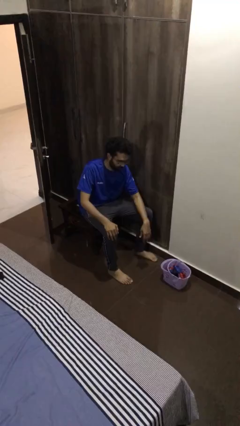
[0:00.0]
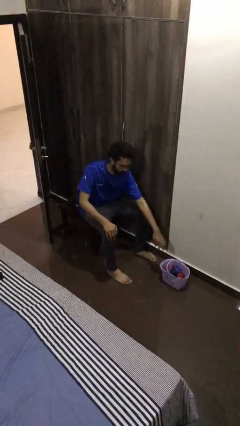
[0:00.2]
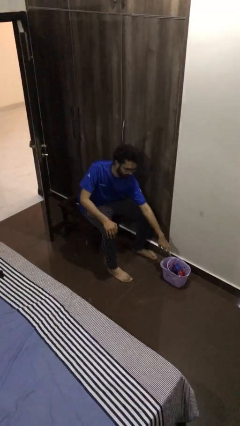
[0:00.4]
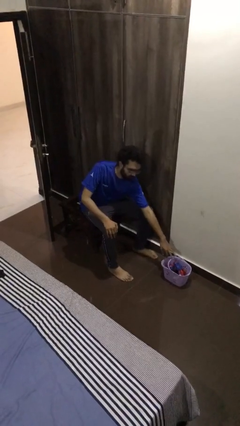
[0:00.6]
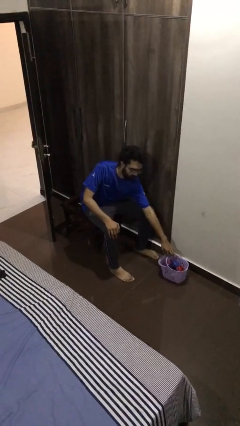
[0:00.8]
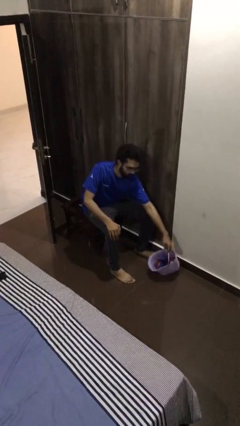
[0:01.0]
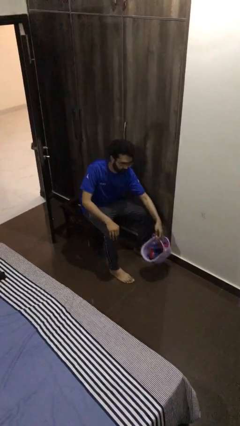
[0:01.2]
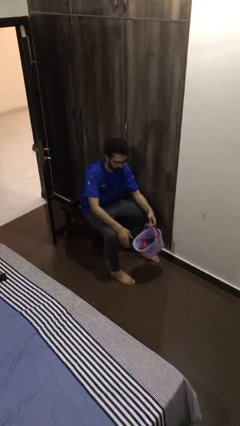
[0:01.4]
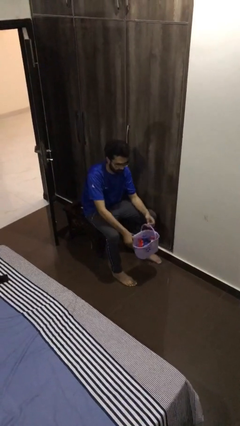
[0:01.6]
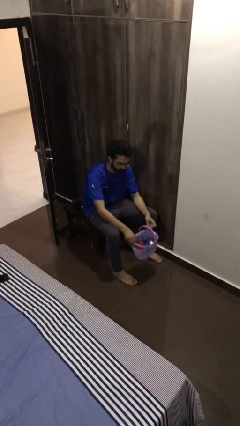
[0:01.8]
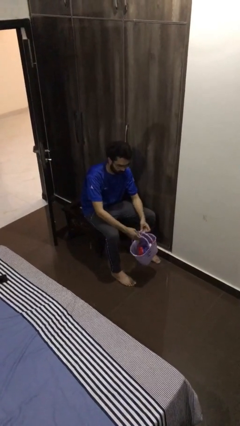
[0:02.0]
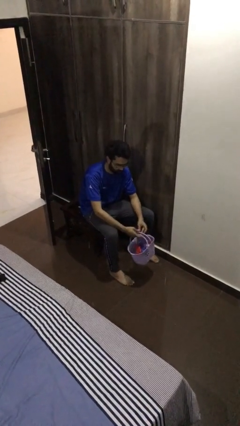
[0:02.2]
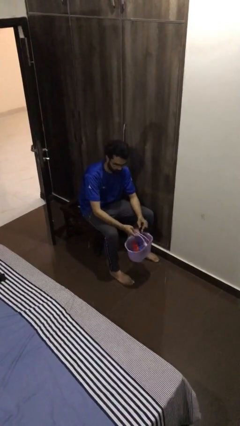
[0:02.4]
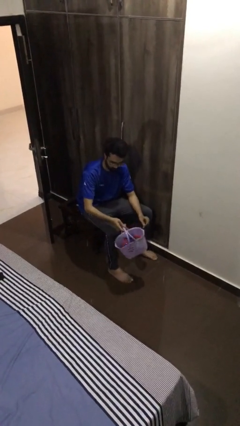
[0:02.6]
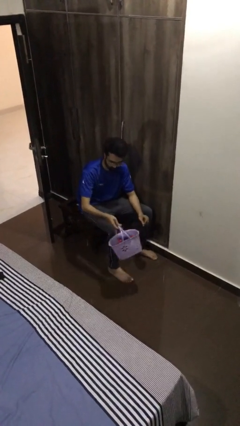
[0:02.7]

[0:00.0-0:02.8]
person picks up object from floor

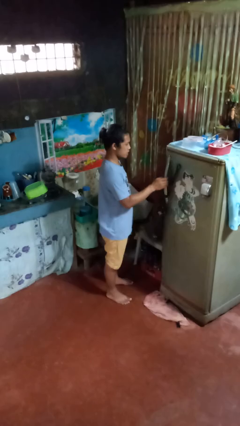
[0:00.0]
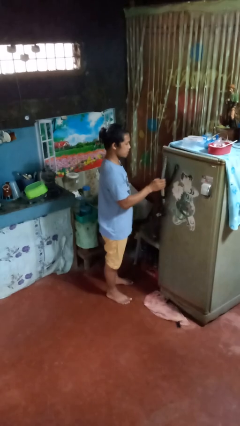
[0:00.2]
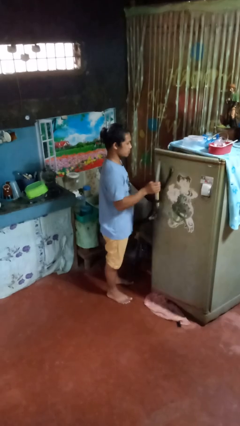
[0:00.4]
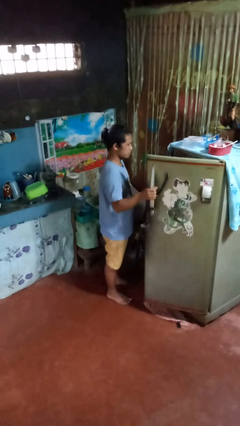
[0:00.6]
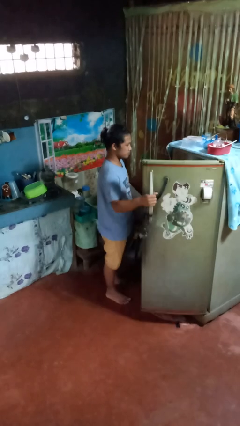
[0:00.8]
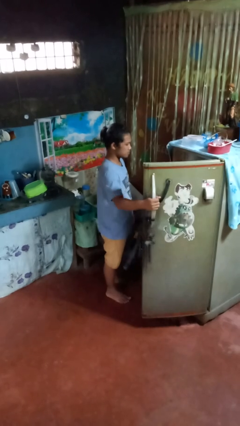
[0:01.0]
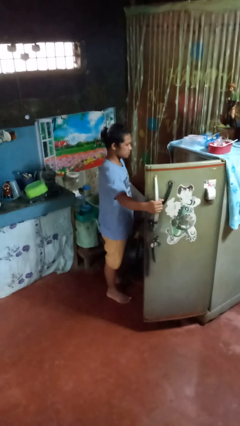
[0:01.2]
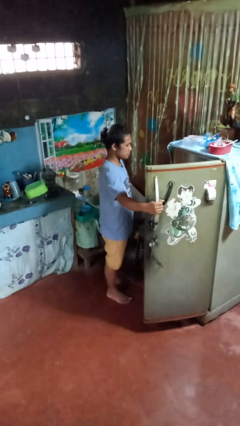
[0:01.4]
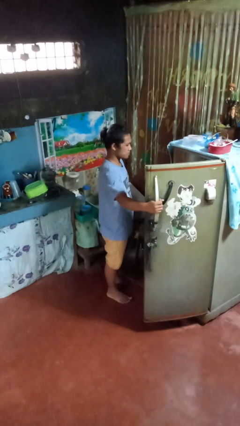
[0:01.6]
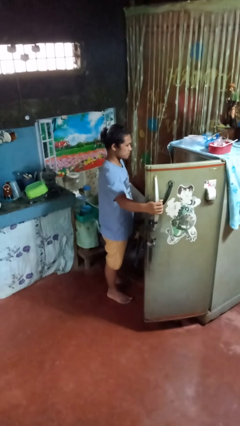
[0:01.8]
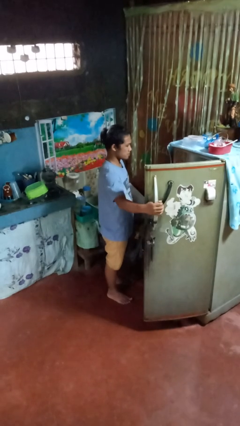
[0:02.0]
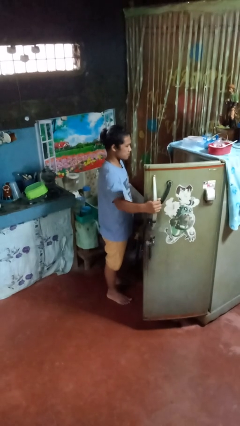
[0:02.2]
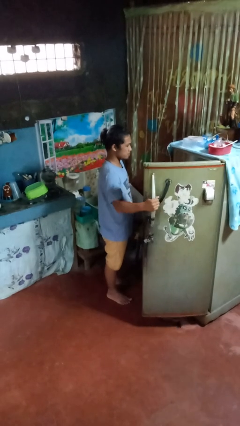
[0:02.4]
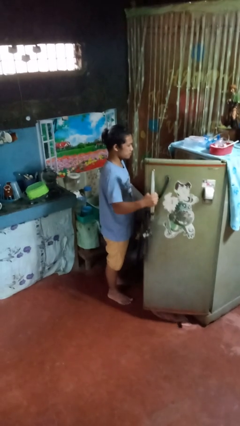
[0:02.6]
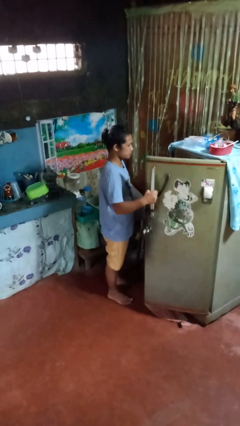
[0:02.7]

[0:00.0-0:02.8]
person opens refrigerator

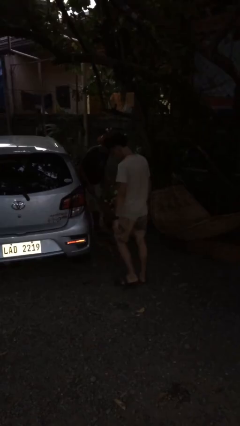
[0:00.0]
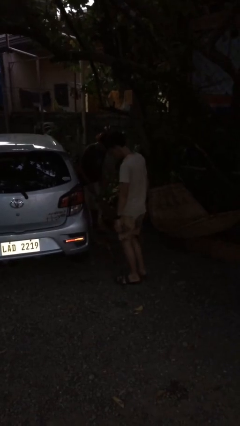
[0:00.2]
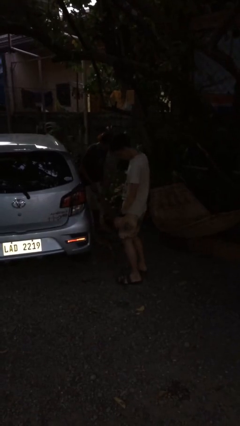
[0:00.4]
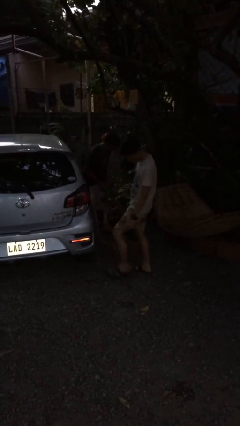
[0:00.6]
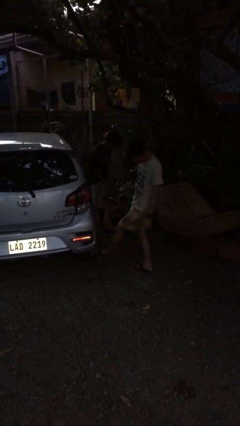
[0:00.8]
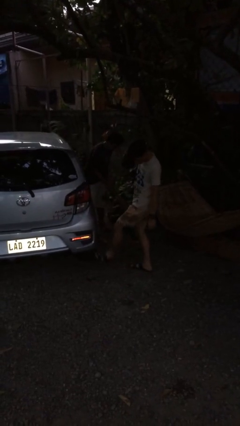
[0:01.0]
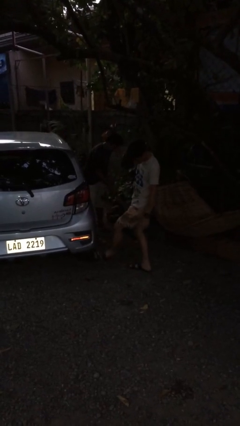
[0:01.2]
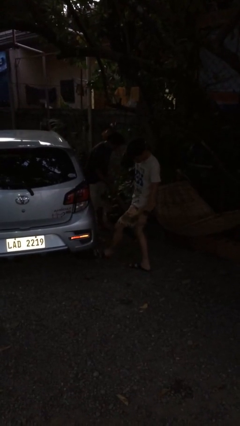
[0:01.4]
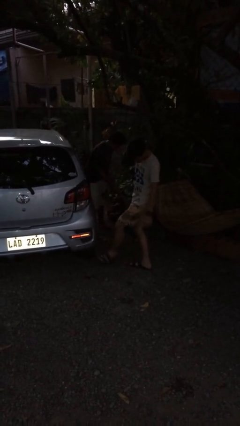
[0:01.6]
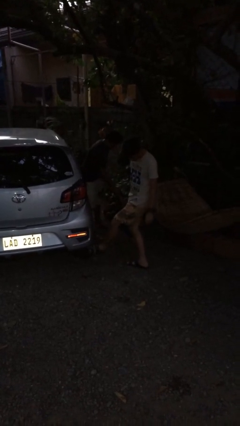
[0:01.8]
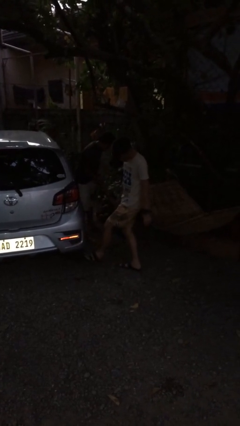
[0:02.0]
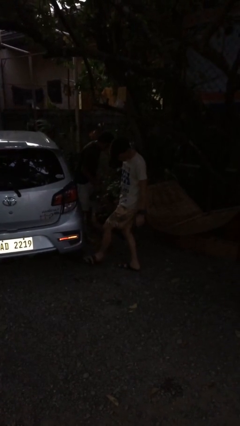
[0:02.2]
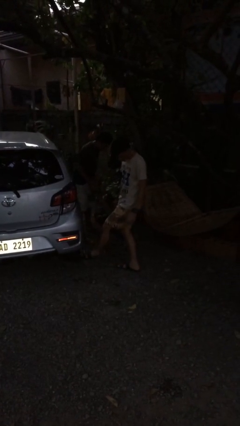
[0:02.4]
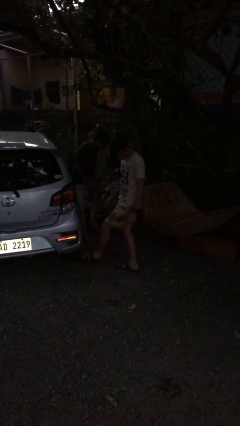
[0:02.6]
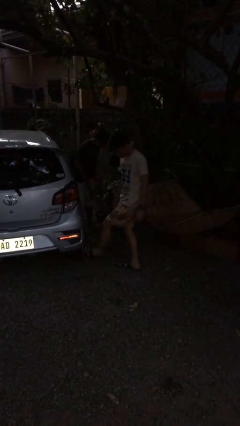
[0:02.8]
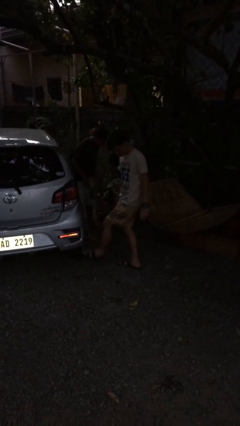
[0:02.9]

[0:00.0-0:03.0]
person kicks car tires

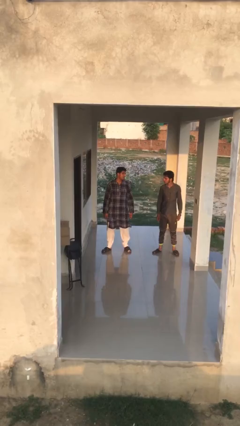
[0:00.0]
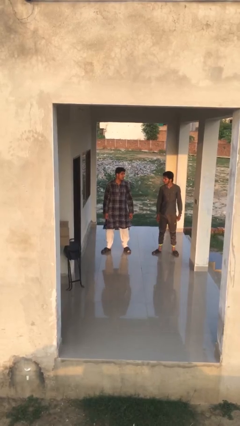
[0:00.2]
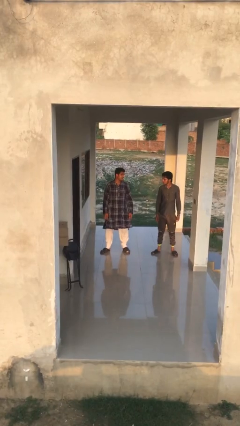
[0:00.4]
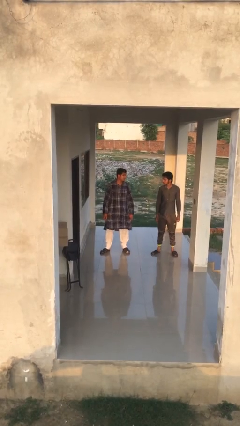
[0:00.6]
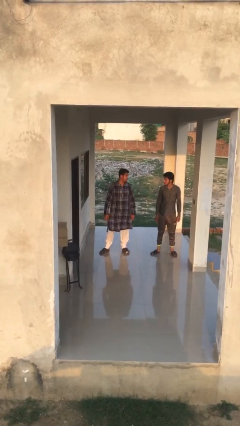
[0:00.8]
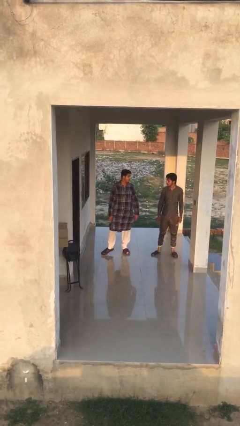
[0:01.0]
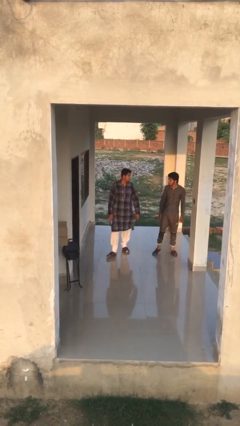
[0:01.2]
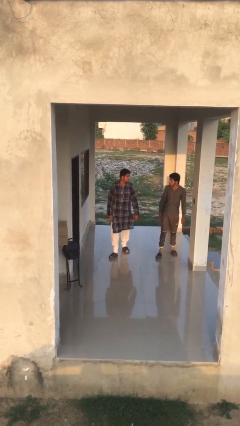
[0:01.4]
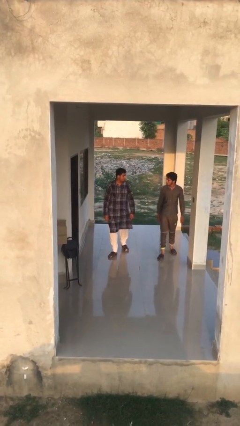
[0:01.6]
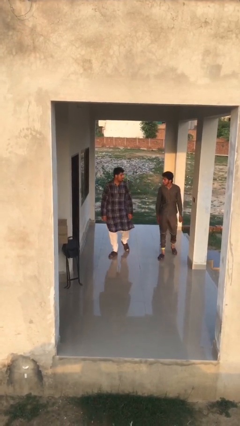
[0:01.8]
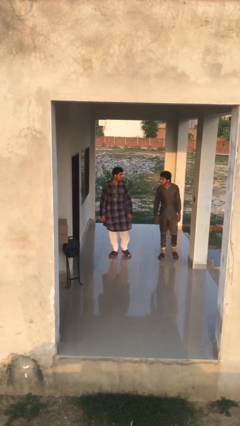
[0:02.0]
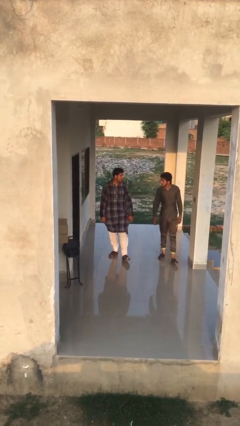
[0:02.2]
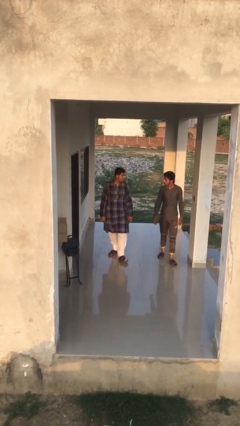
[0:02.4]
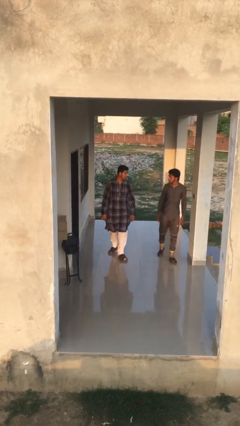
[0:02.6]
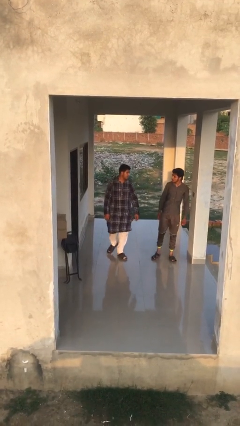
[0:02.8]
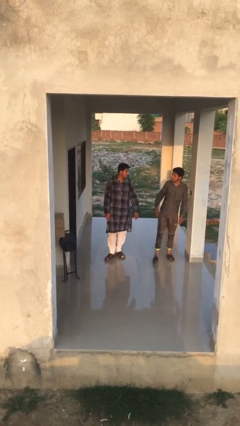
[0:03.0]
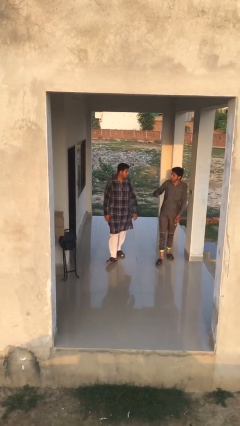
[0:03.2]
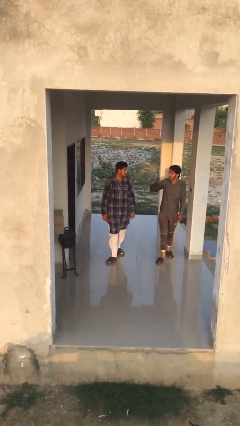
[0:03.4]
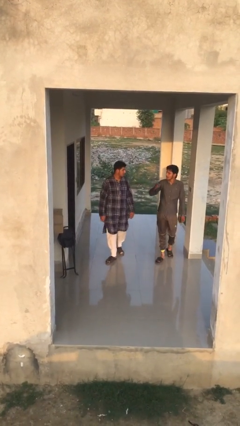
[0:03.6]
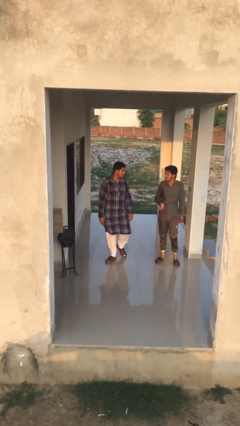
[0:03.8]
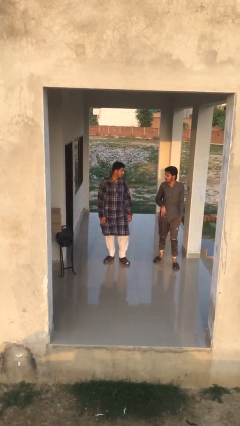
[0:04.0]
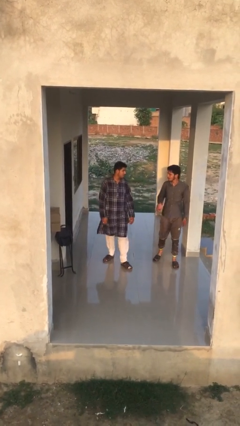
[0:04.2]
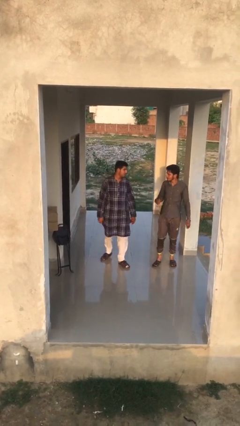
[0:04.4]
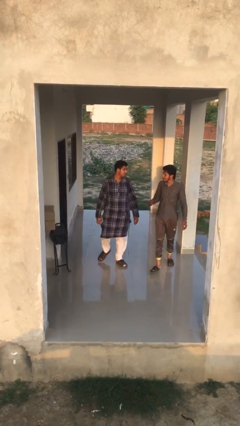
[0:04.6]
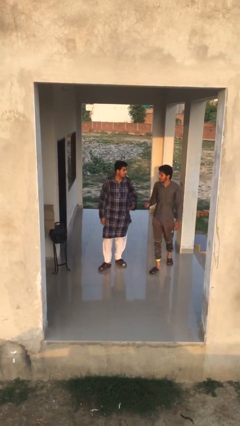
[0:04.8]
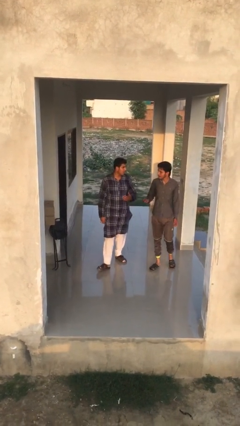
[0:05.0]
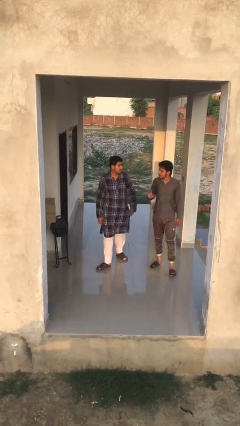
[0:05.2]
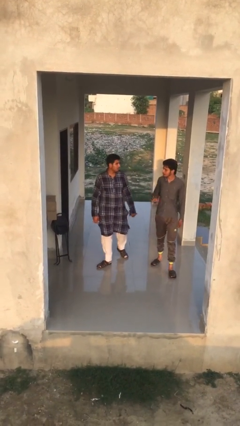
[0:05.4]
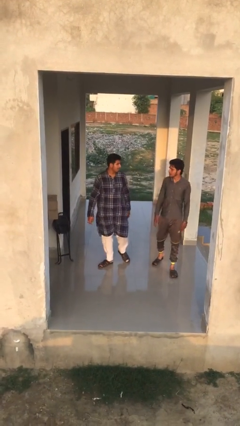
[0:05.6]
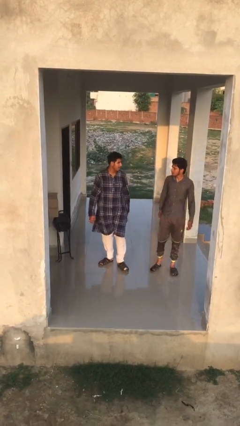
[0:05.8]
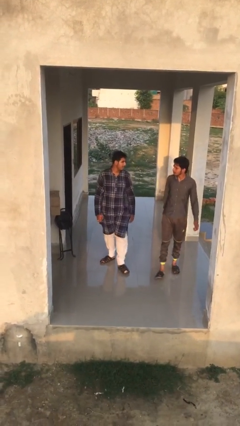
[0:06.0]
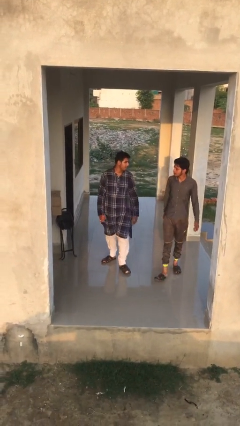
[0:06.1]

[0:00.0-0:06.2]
person talks to person

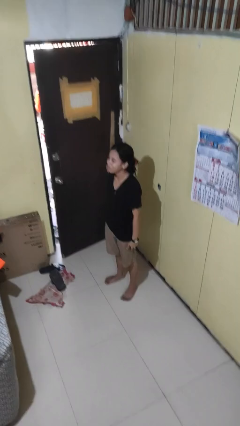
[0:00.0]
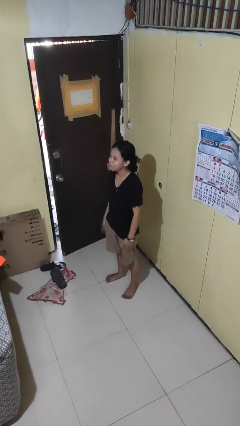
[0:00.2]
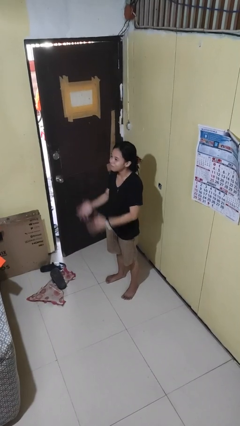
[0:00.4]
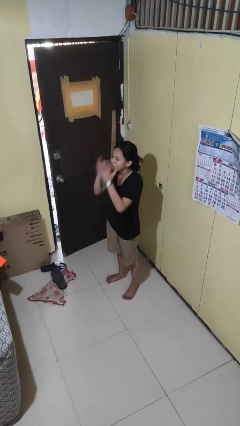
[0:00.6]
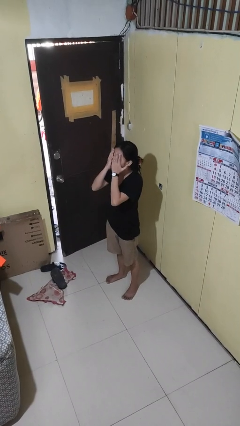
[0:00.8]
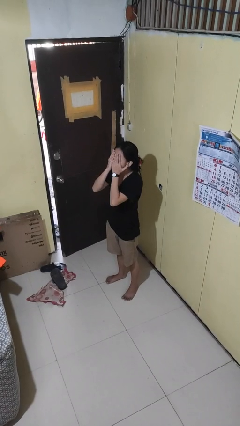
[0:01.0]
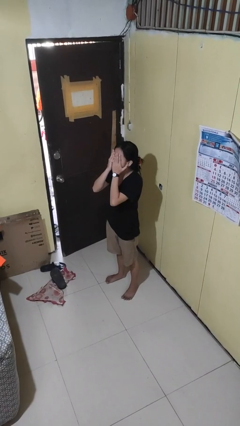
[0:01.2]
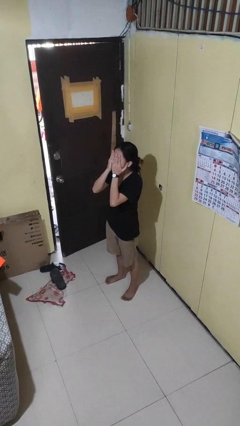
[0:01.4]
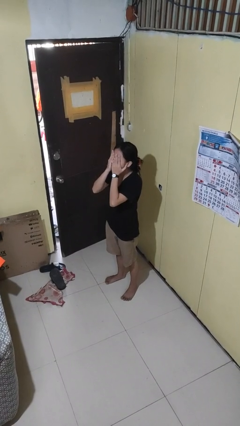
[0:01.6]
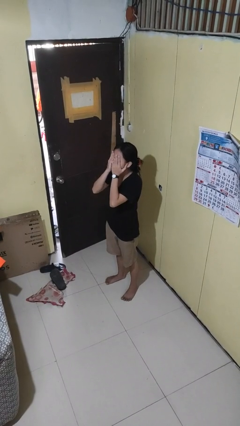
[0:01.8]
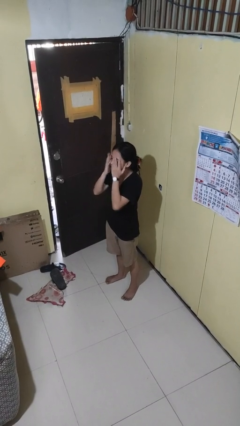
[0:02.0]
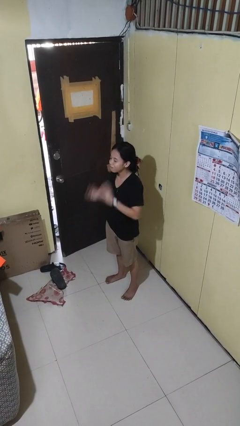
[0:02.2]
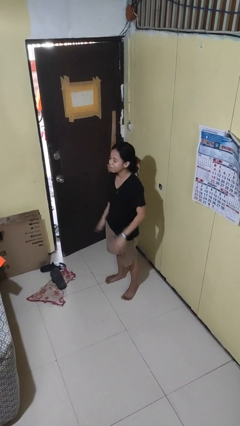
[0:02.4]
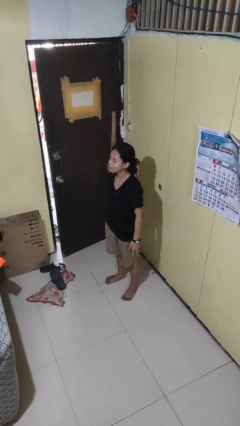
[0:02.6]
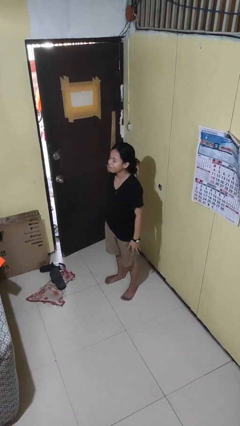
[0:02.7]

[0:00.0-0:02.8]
person covers face with hands

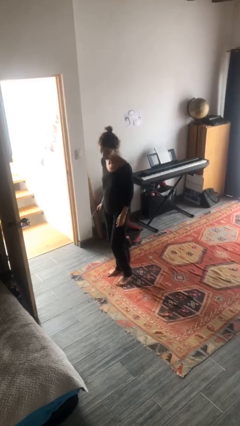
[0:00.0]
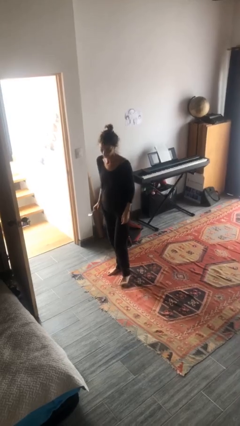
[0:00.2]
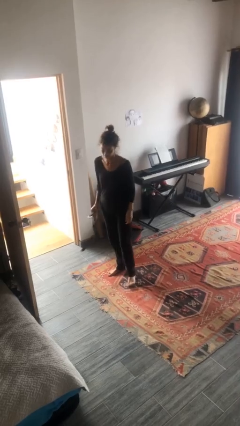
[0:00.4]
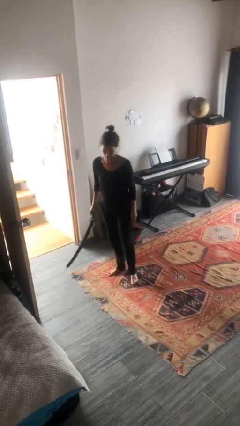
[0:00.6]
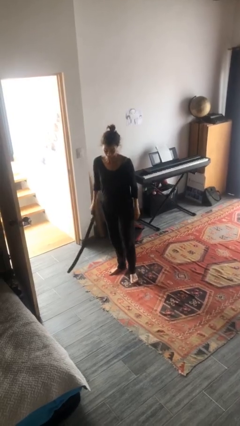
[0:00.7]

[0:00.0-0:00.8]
person takes off belt
